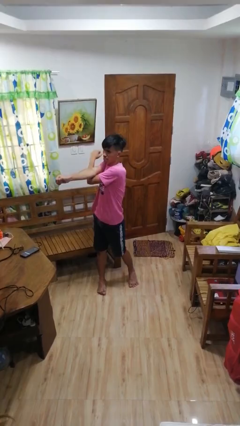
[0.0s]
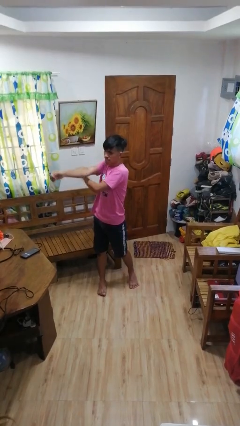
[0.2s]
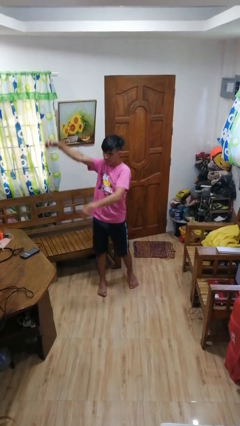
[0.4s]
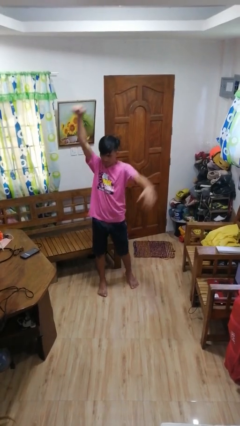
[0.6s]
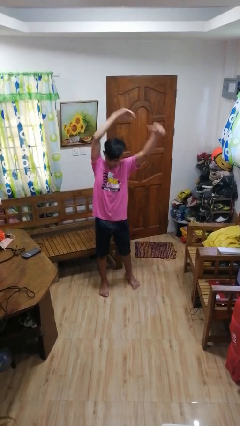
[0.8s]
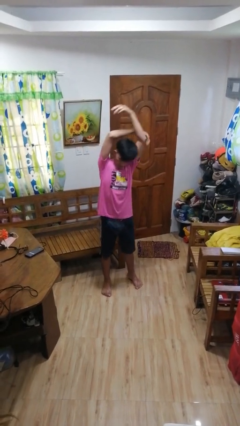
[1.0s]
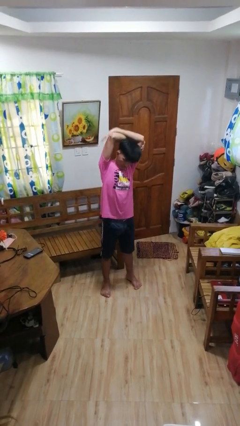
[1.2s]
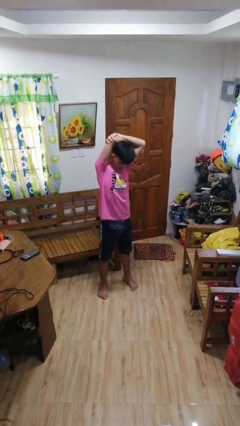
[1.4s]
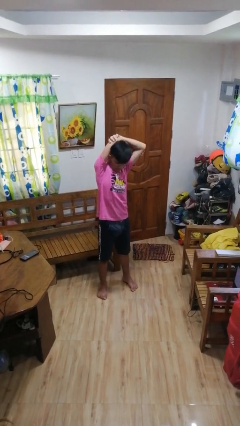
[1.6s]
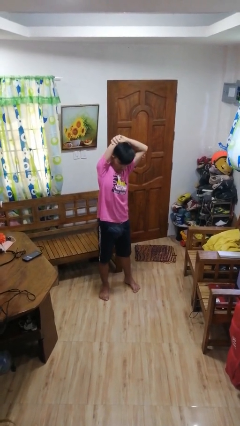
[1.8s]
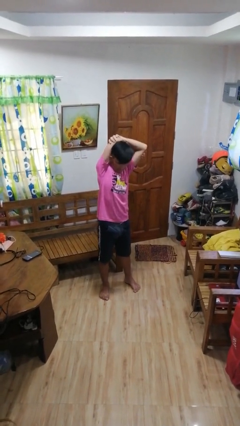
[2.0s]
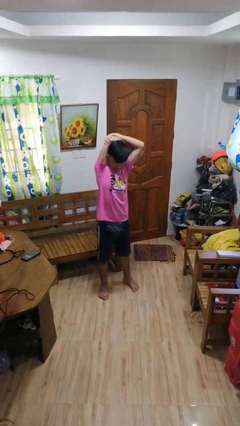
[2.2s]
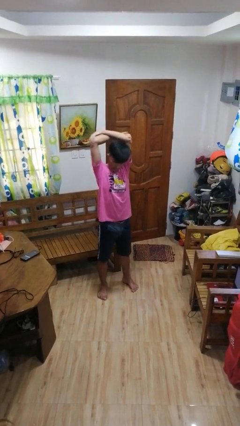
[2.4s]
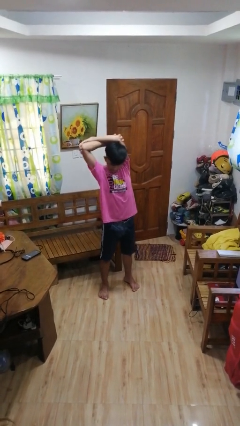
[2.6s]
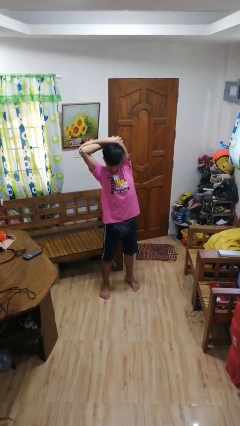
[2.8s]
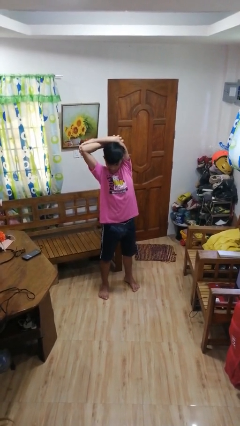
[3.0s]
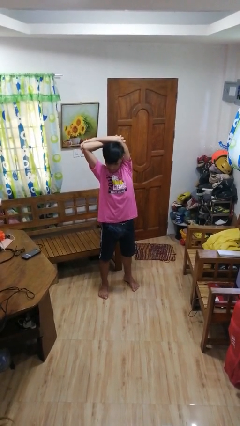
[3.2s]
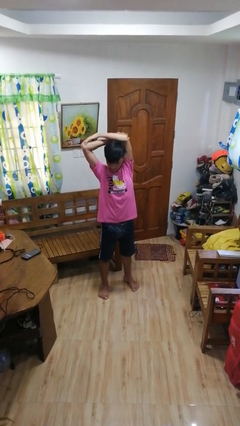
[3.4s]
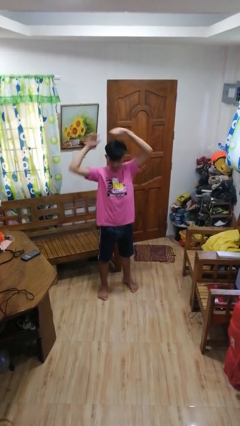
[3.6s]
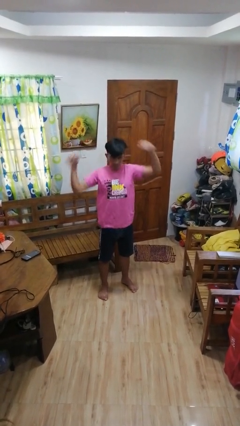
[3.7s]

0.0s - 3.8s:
person stretches arms over head

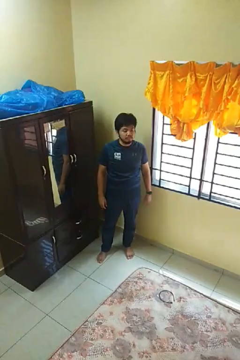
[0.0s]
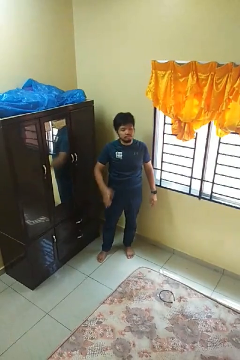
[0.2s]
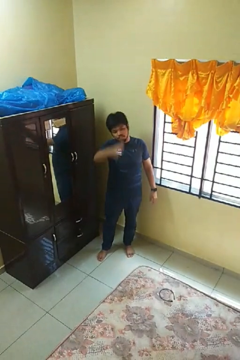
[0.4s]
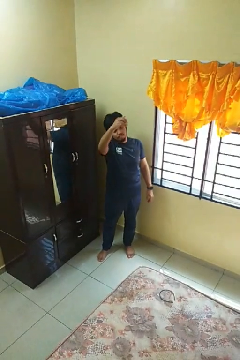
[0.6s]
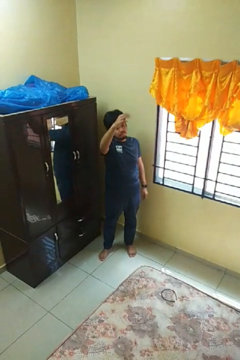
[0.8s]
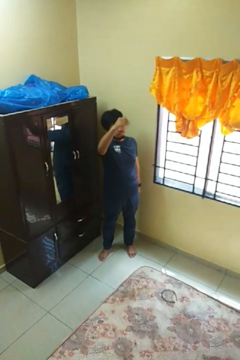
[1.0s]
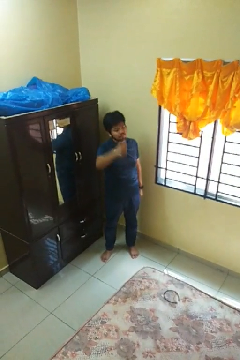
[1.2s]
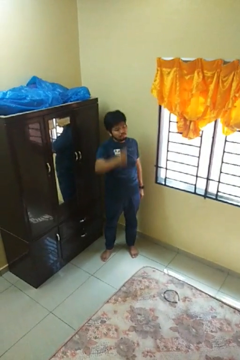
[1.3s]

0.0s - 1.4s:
person gestures come here

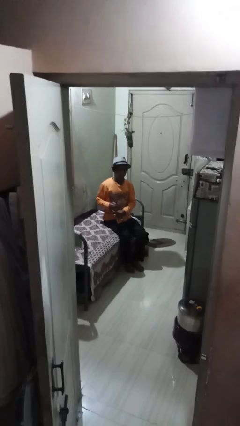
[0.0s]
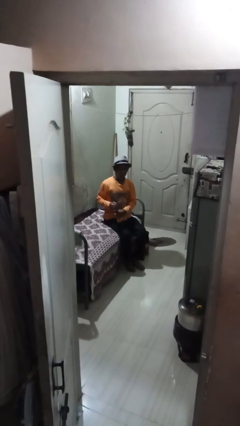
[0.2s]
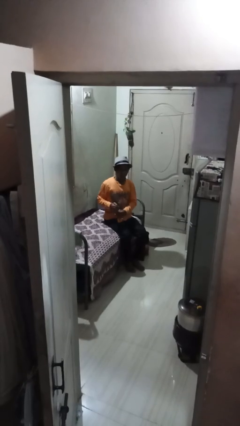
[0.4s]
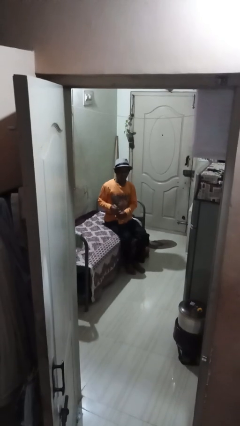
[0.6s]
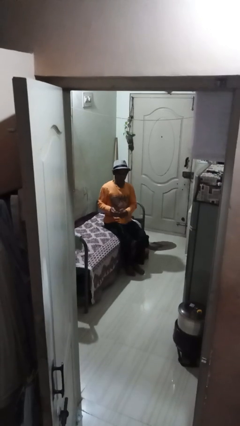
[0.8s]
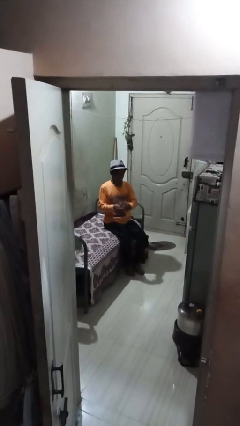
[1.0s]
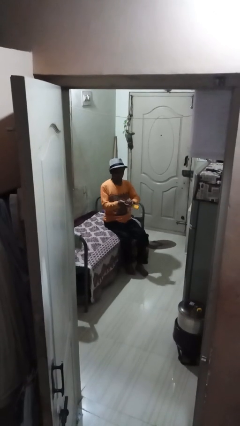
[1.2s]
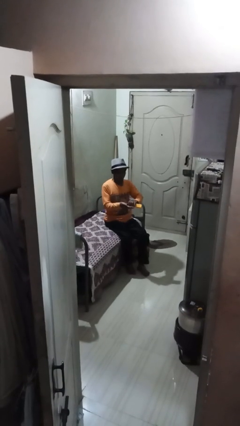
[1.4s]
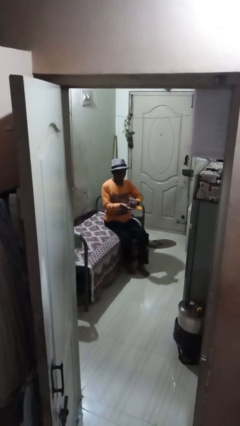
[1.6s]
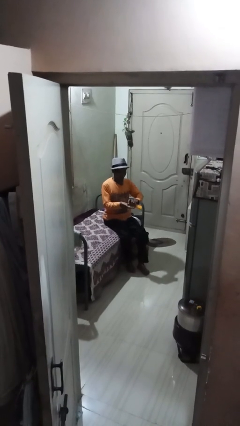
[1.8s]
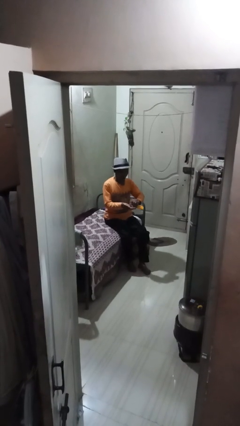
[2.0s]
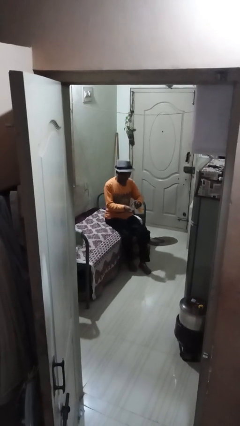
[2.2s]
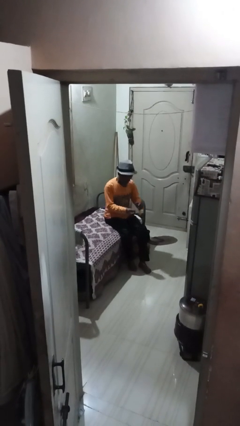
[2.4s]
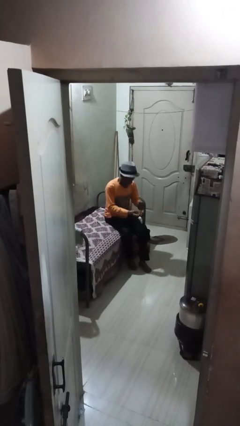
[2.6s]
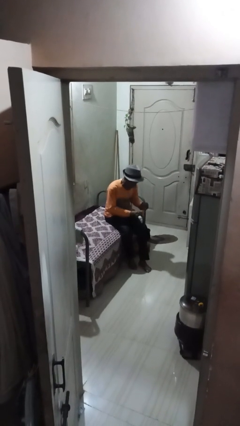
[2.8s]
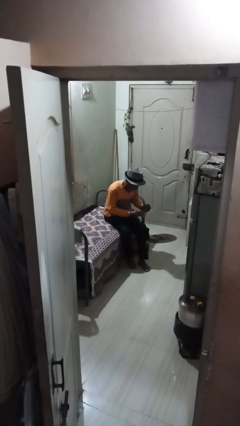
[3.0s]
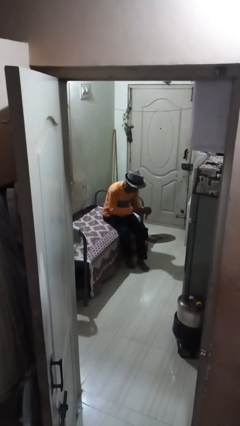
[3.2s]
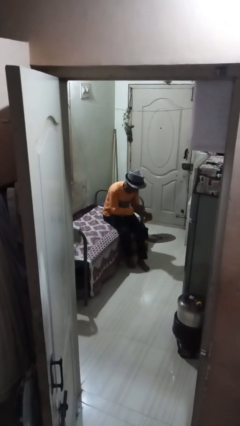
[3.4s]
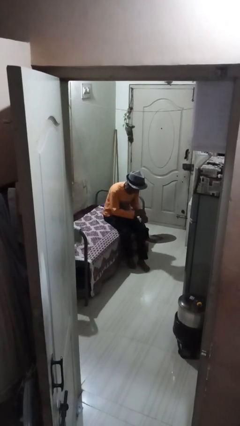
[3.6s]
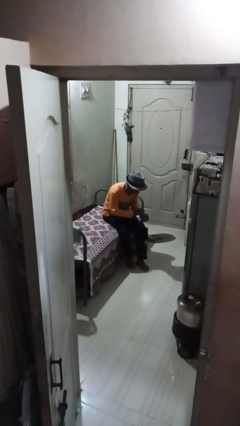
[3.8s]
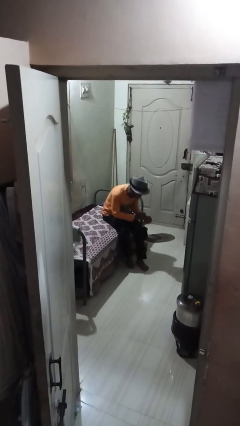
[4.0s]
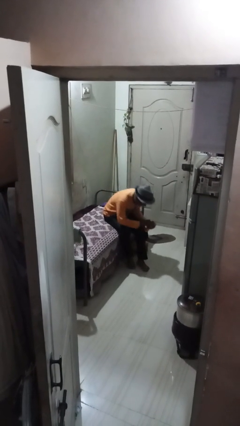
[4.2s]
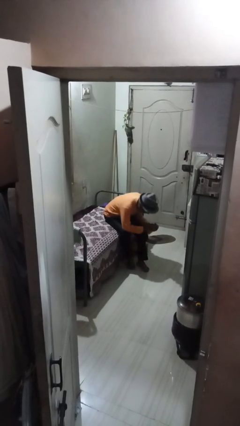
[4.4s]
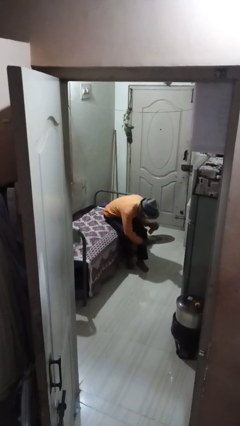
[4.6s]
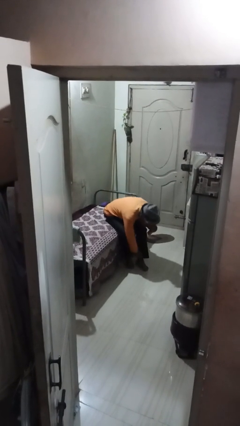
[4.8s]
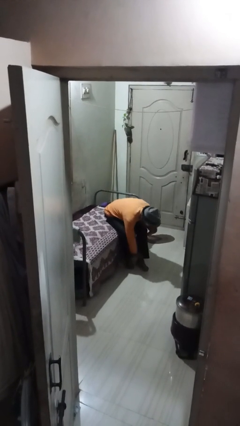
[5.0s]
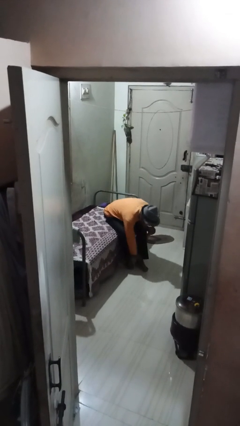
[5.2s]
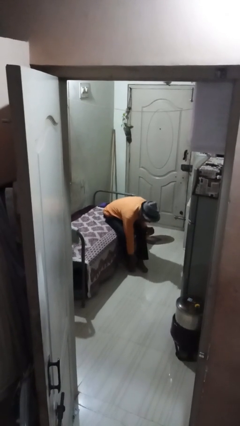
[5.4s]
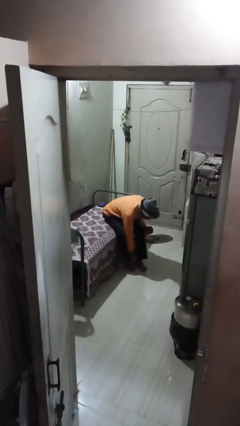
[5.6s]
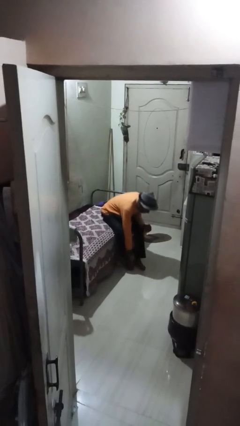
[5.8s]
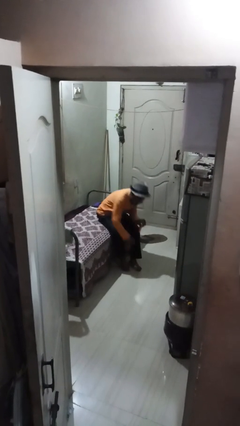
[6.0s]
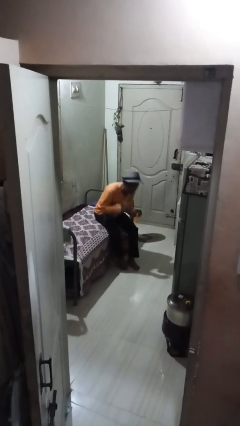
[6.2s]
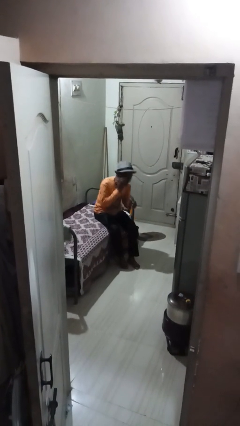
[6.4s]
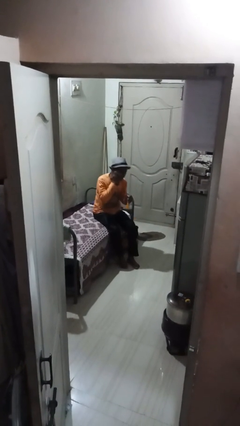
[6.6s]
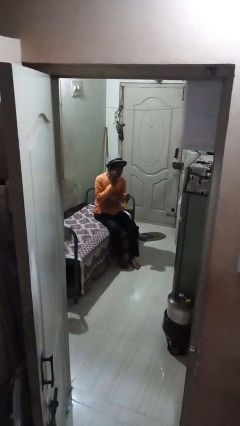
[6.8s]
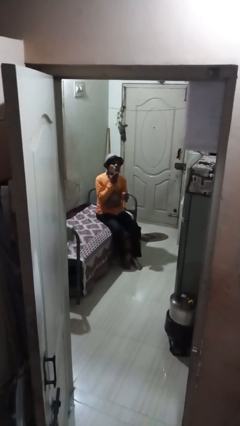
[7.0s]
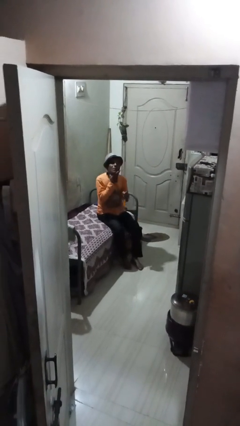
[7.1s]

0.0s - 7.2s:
person applies sunscreen

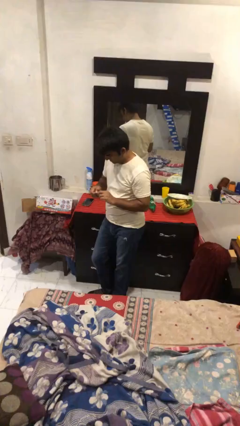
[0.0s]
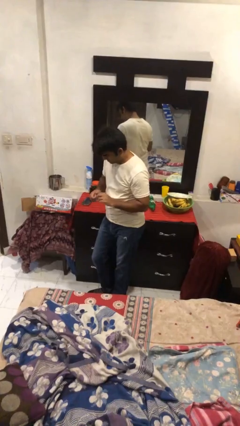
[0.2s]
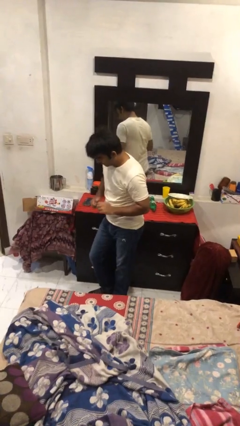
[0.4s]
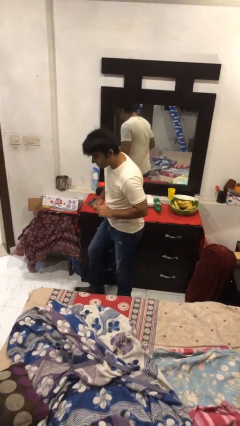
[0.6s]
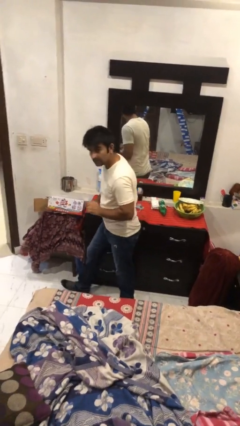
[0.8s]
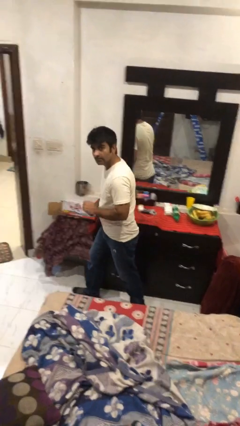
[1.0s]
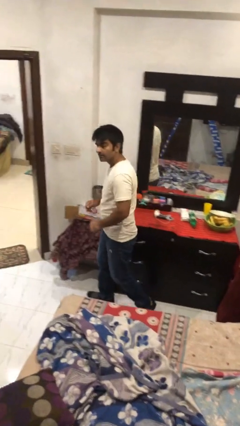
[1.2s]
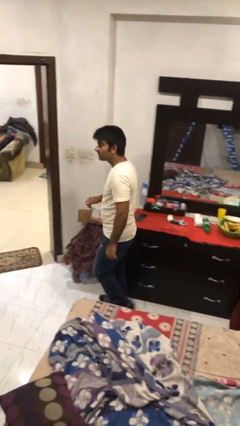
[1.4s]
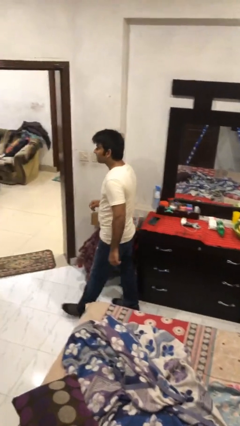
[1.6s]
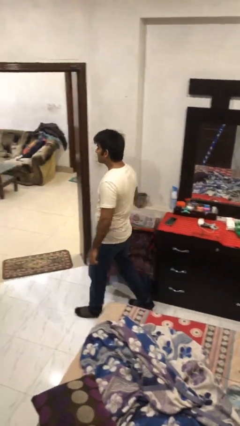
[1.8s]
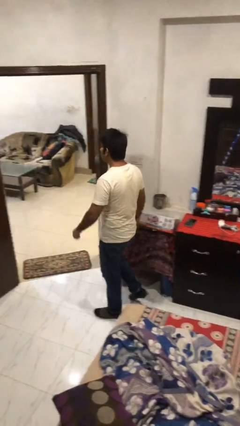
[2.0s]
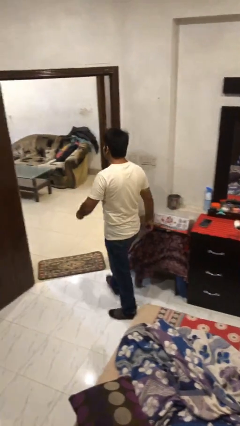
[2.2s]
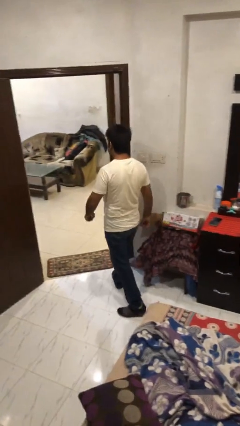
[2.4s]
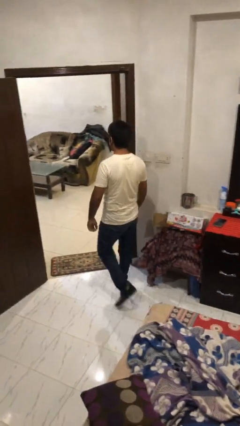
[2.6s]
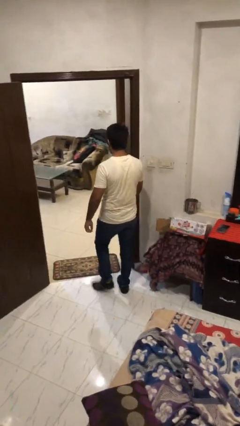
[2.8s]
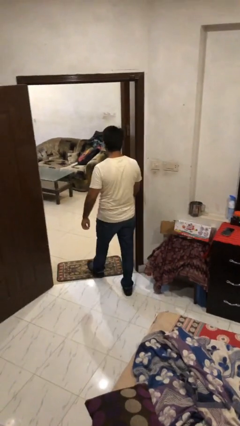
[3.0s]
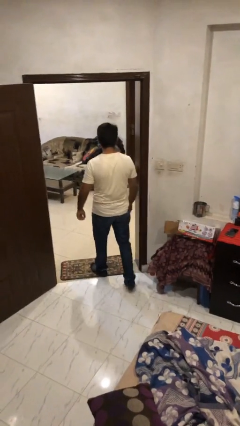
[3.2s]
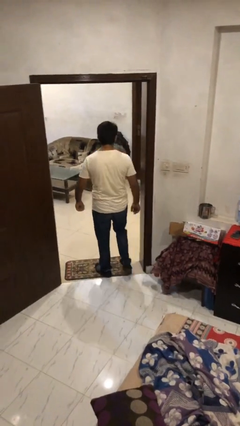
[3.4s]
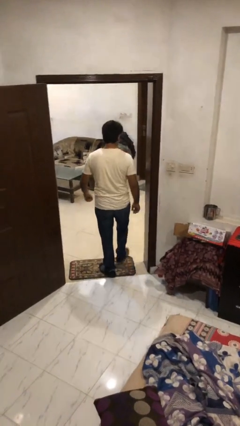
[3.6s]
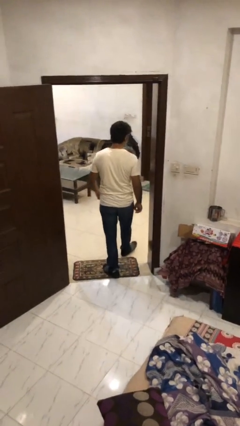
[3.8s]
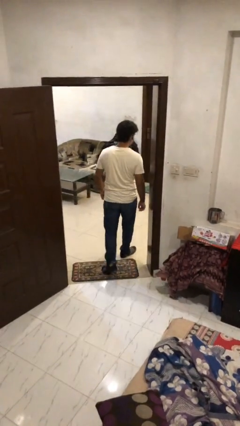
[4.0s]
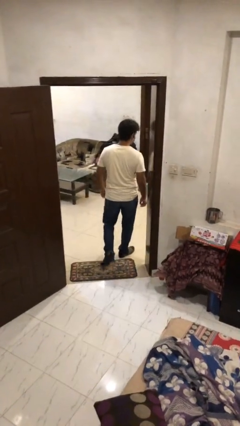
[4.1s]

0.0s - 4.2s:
person exits scene through structure

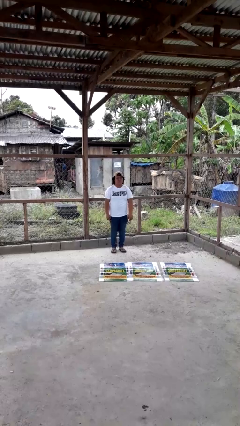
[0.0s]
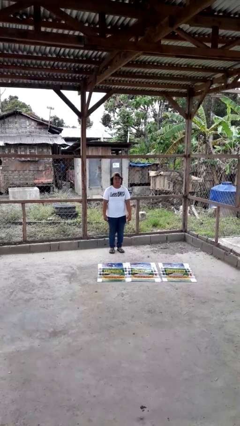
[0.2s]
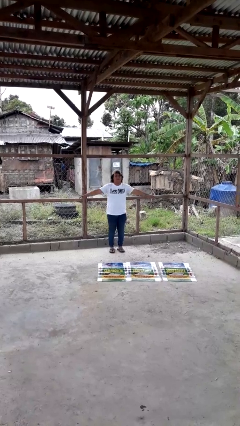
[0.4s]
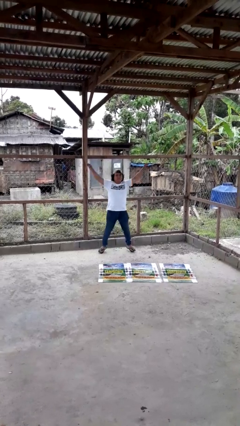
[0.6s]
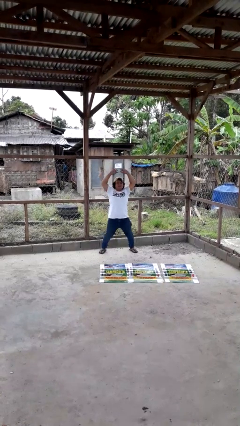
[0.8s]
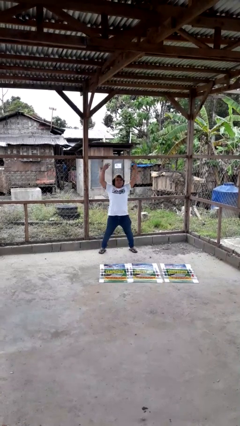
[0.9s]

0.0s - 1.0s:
person exercises with jumping jacks
